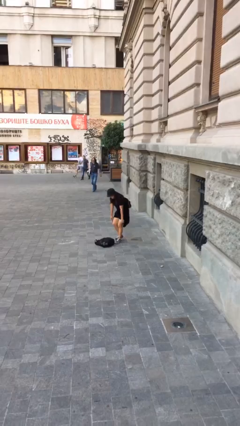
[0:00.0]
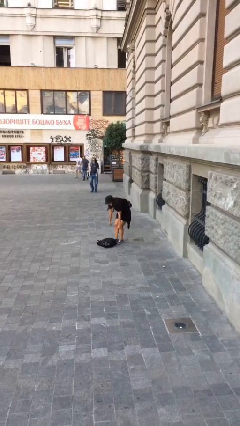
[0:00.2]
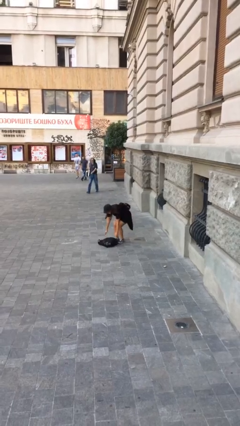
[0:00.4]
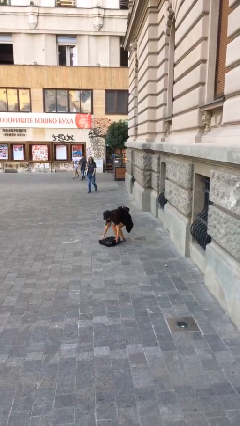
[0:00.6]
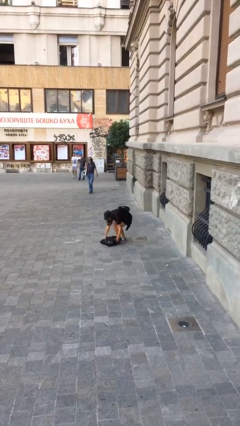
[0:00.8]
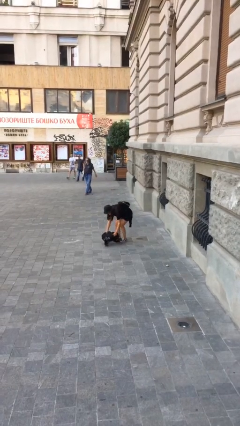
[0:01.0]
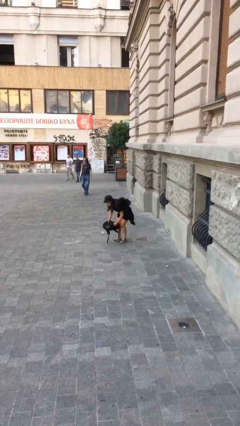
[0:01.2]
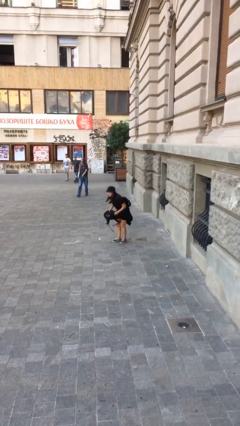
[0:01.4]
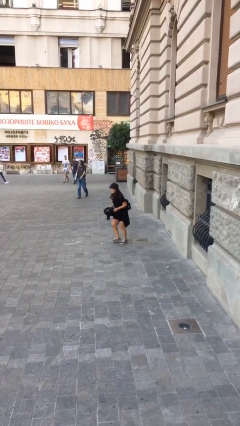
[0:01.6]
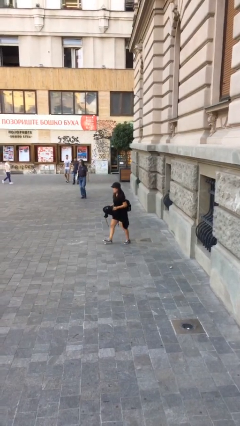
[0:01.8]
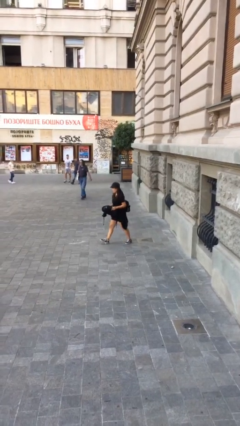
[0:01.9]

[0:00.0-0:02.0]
person picks up object from floor

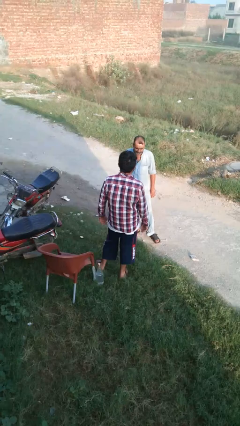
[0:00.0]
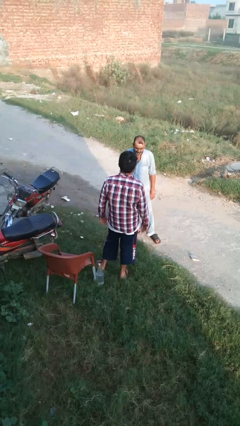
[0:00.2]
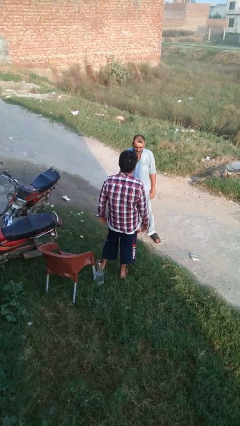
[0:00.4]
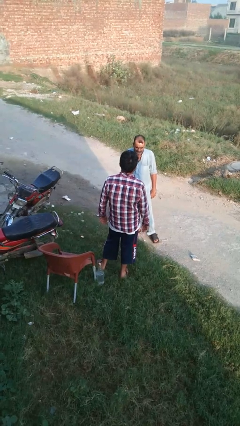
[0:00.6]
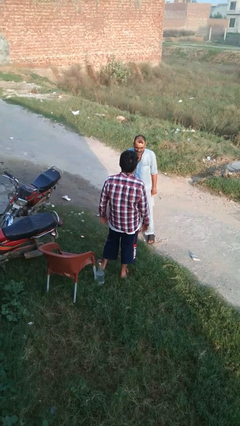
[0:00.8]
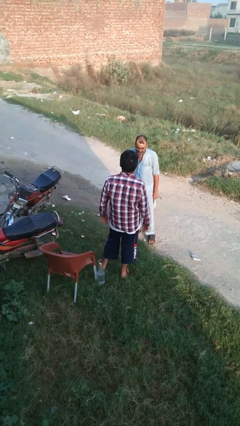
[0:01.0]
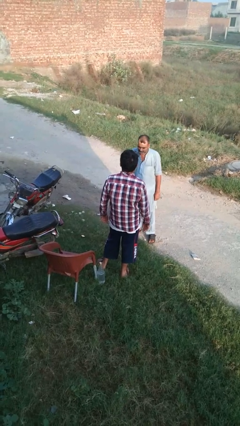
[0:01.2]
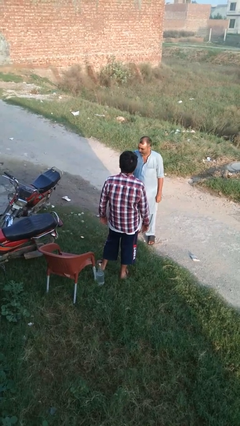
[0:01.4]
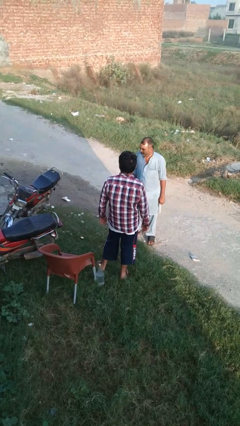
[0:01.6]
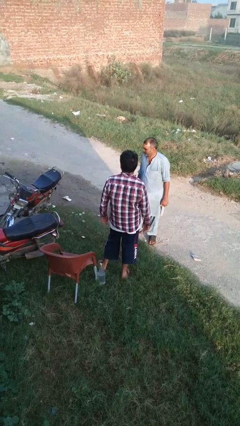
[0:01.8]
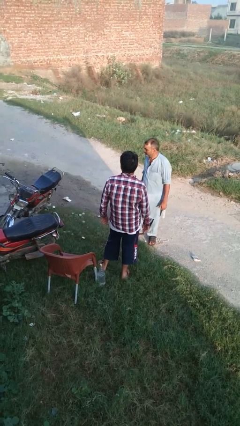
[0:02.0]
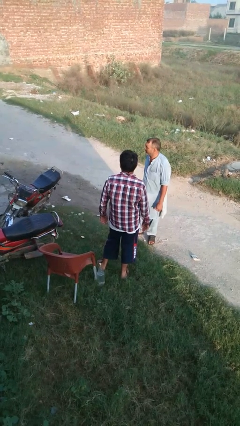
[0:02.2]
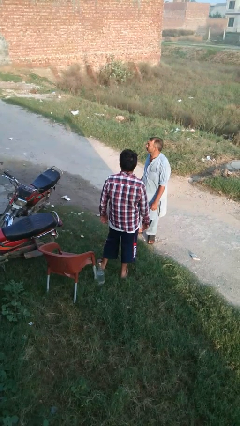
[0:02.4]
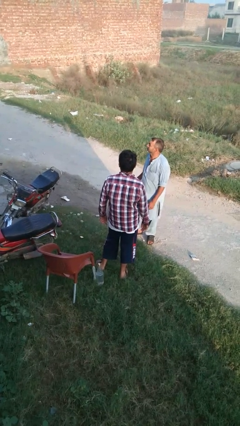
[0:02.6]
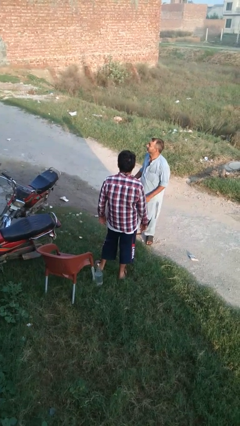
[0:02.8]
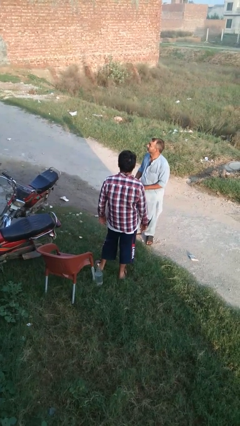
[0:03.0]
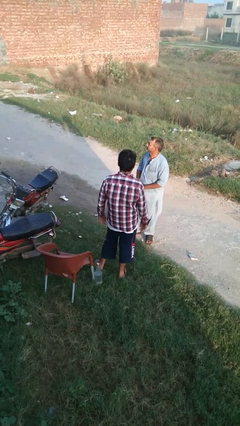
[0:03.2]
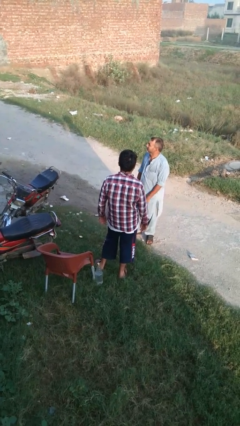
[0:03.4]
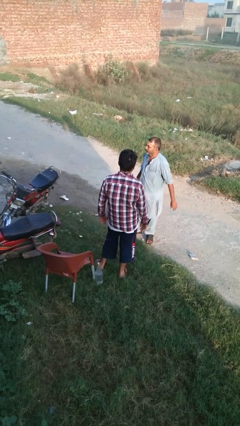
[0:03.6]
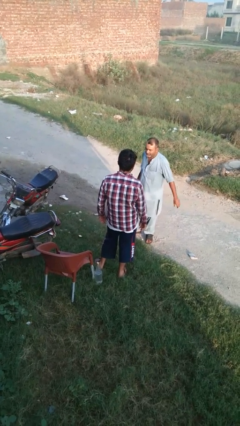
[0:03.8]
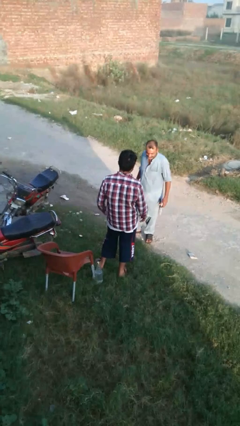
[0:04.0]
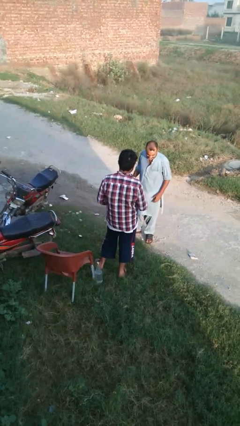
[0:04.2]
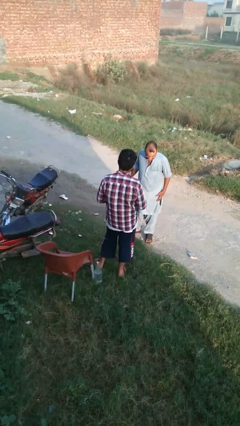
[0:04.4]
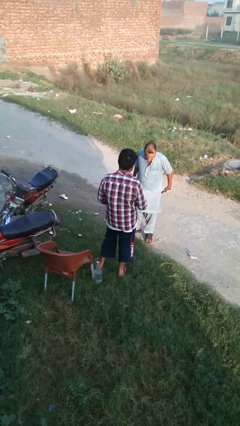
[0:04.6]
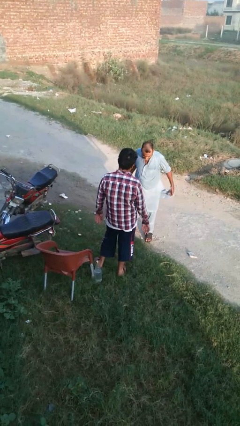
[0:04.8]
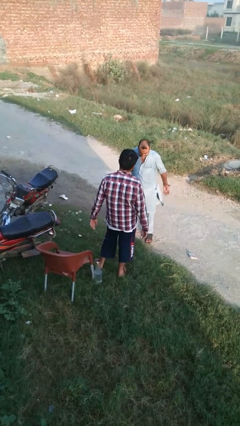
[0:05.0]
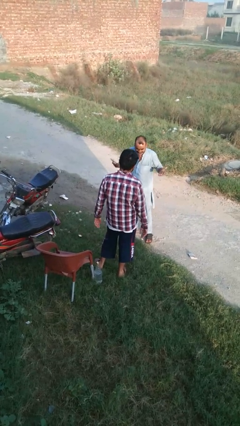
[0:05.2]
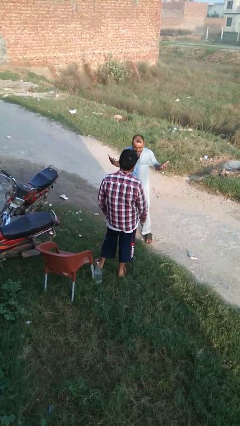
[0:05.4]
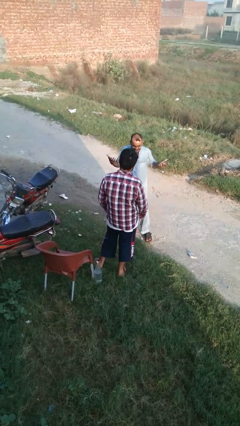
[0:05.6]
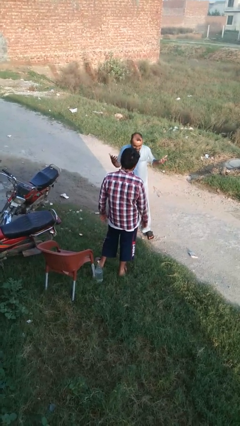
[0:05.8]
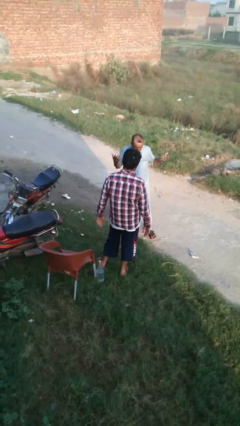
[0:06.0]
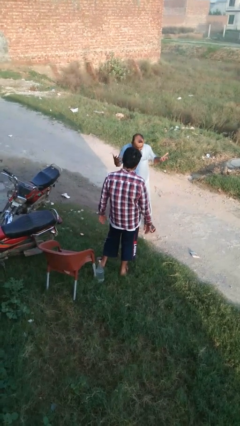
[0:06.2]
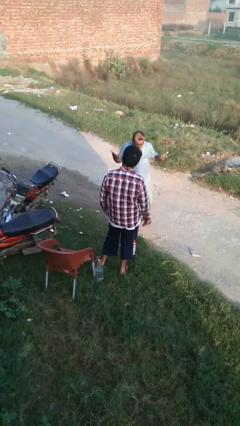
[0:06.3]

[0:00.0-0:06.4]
person laughs with person

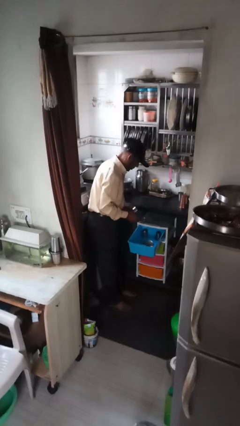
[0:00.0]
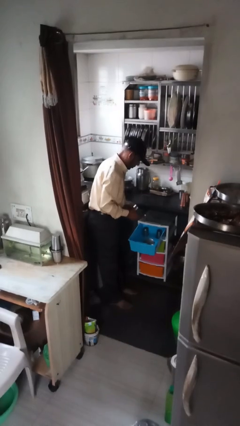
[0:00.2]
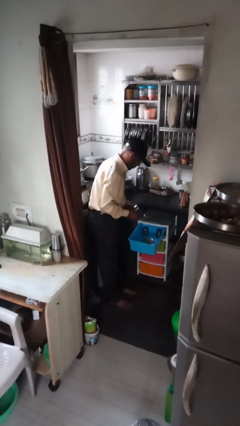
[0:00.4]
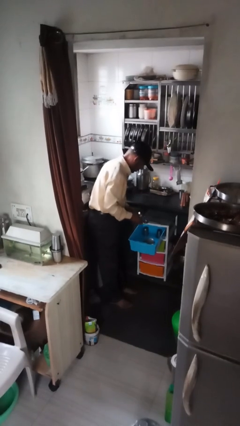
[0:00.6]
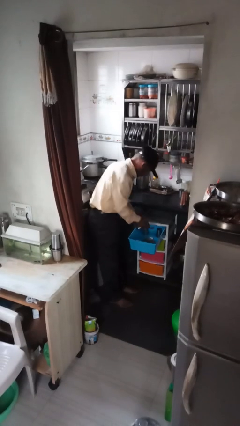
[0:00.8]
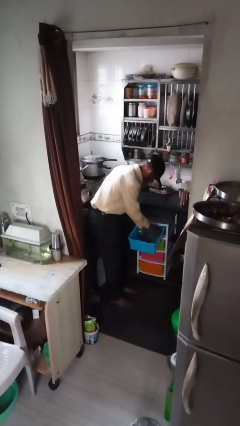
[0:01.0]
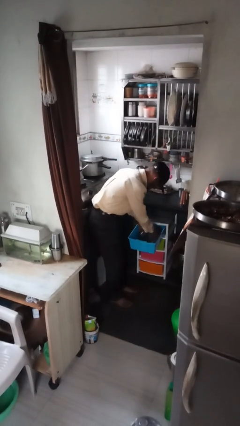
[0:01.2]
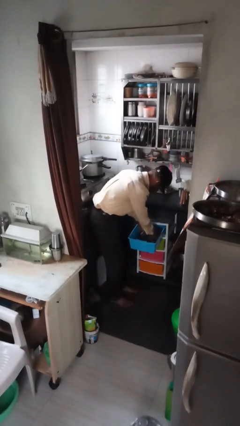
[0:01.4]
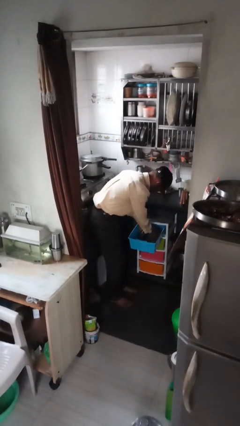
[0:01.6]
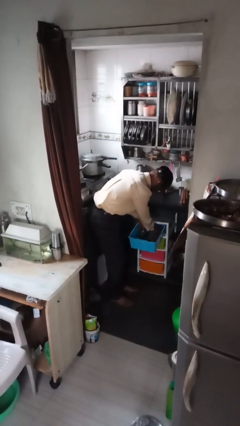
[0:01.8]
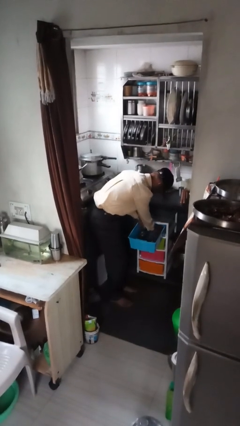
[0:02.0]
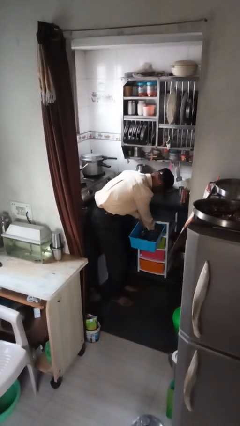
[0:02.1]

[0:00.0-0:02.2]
person puts object into kitchen drawer

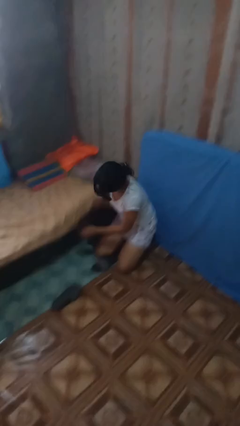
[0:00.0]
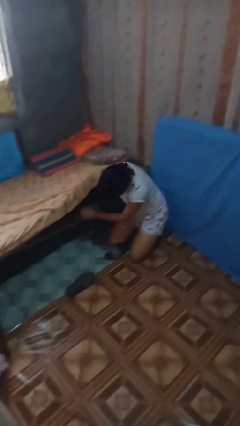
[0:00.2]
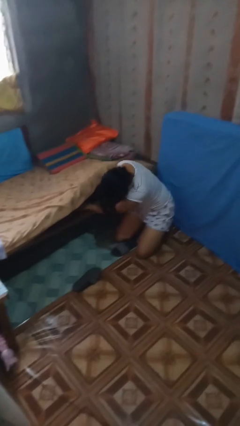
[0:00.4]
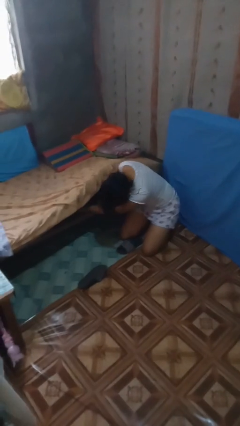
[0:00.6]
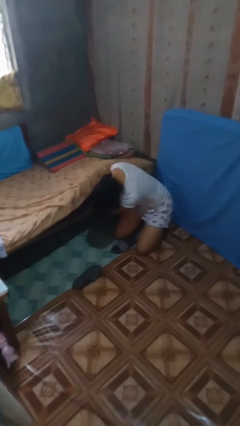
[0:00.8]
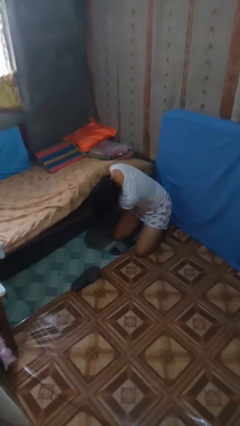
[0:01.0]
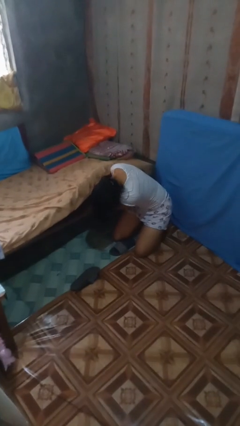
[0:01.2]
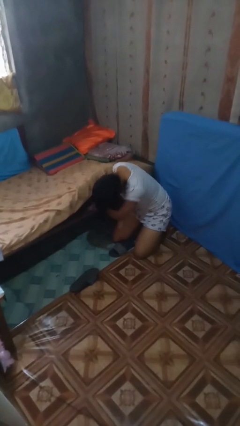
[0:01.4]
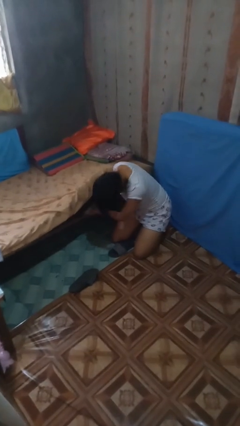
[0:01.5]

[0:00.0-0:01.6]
person searches under bed

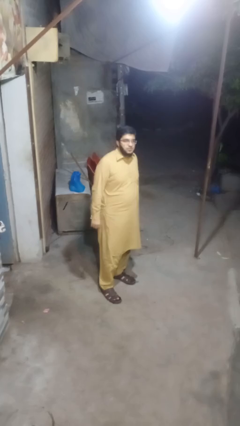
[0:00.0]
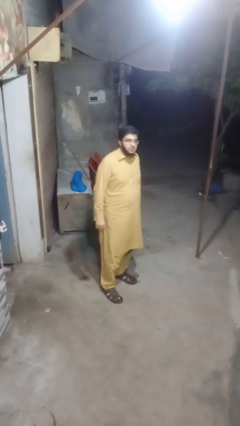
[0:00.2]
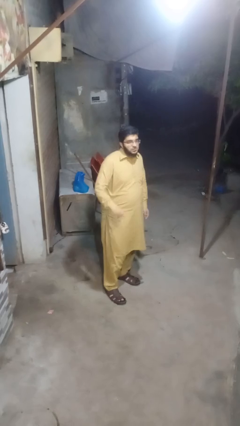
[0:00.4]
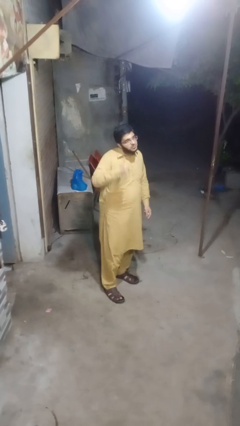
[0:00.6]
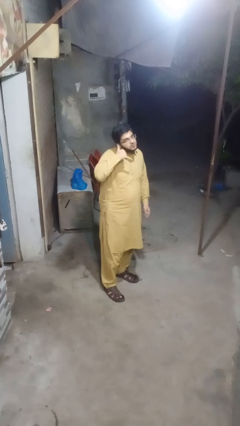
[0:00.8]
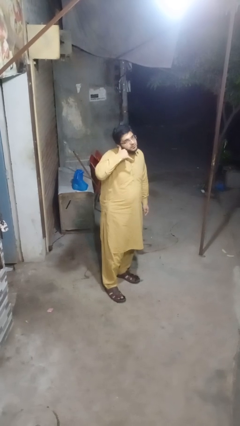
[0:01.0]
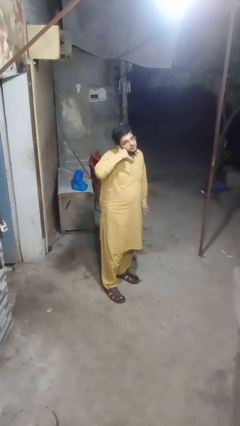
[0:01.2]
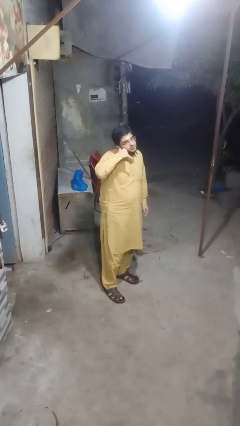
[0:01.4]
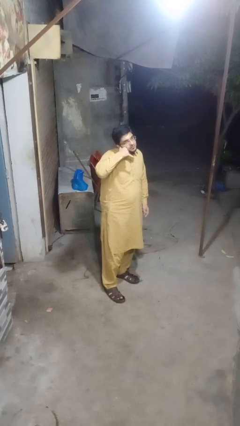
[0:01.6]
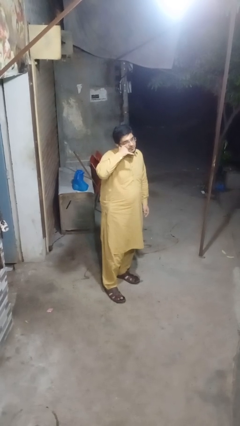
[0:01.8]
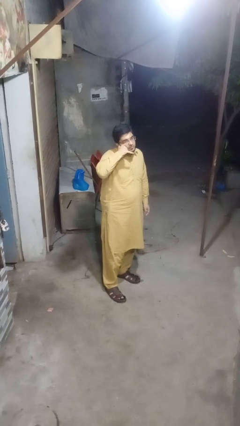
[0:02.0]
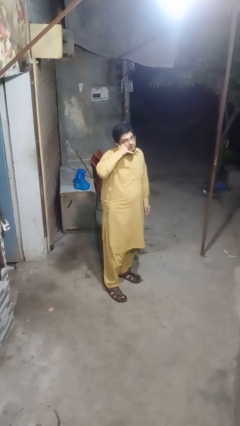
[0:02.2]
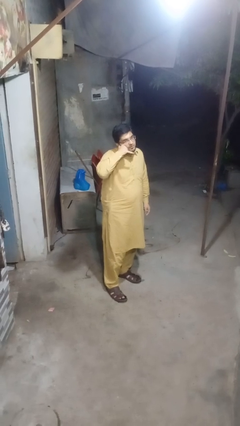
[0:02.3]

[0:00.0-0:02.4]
person gestures call me

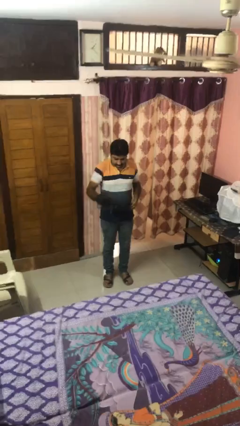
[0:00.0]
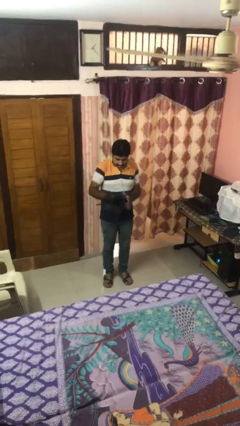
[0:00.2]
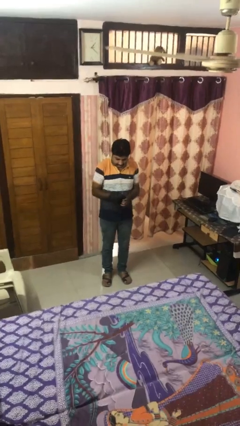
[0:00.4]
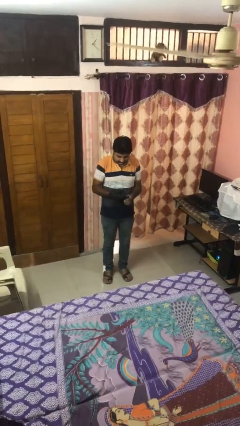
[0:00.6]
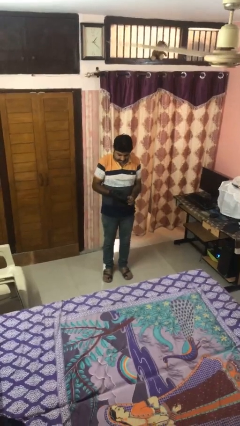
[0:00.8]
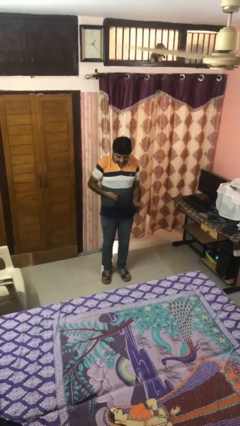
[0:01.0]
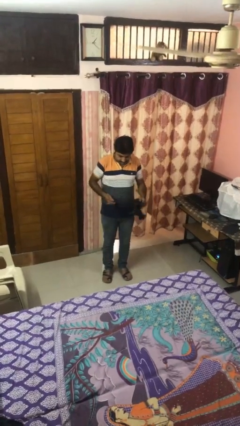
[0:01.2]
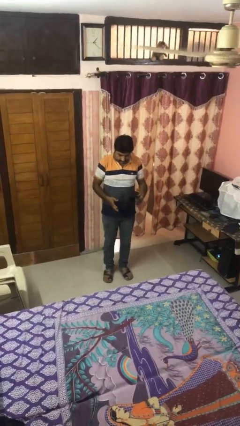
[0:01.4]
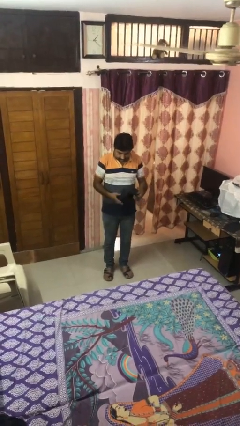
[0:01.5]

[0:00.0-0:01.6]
person takes off gloves

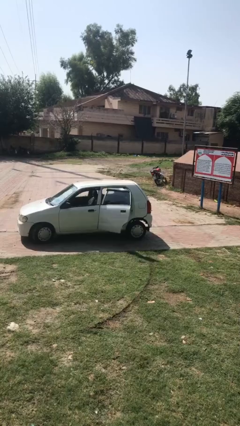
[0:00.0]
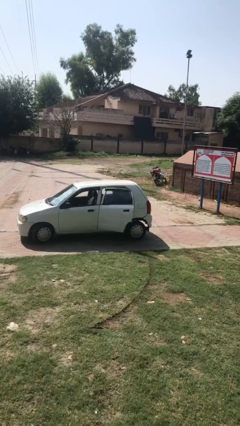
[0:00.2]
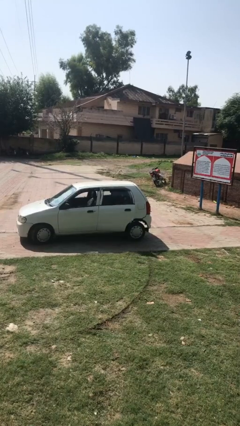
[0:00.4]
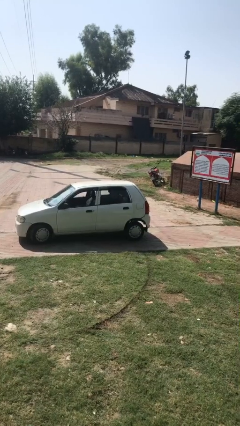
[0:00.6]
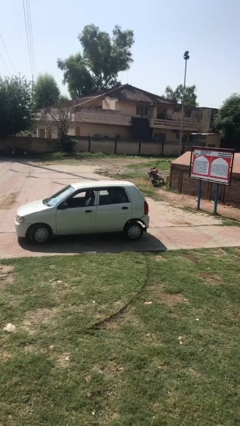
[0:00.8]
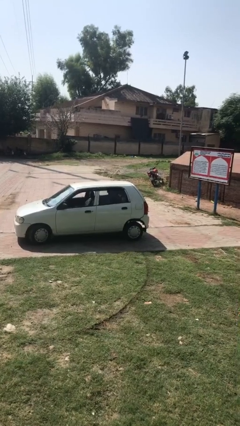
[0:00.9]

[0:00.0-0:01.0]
person closes car door
